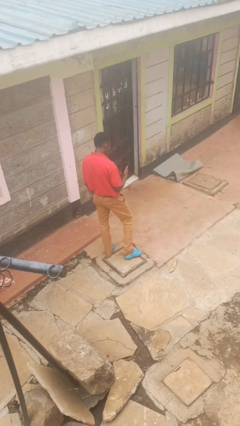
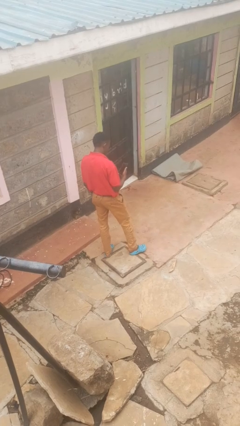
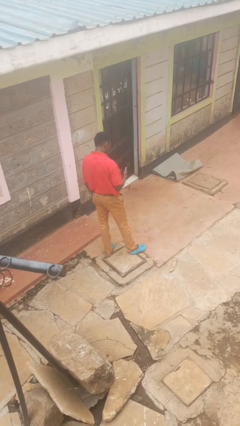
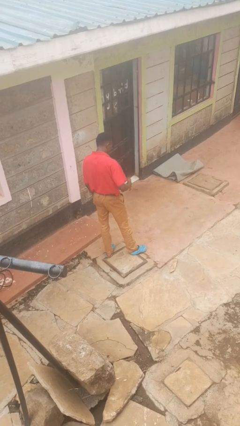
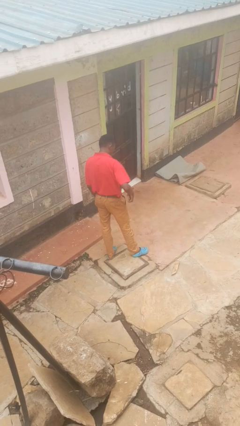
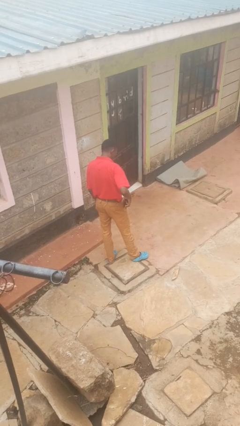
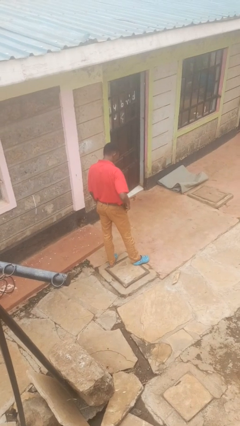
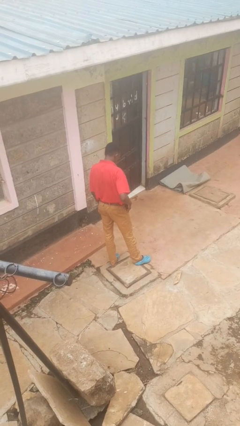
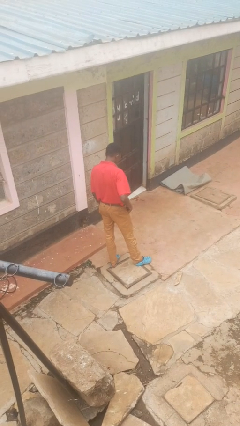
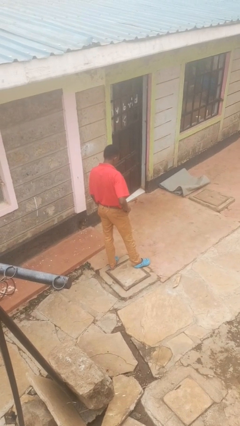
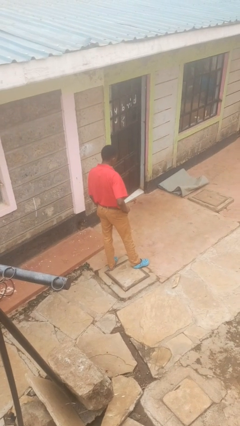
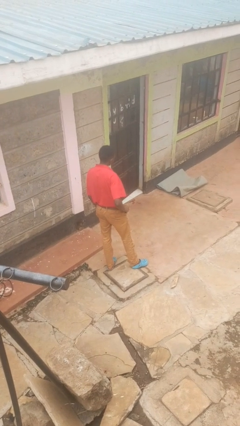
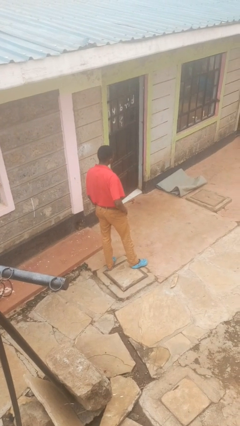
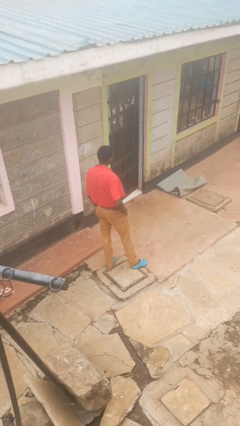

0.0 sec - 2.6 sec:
person puts phone into pocket

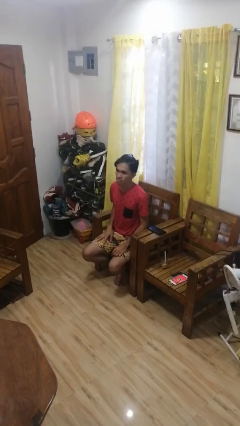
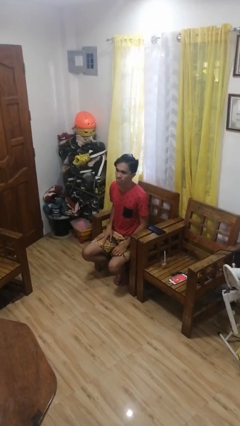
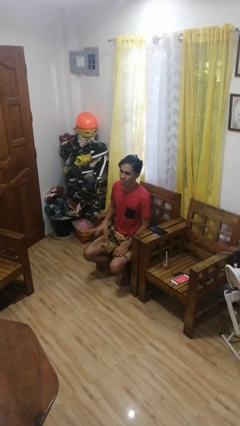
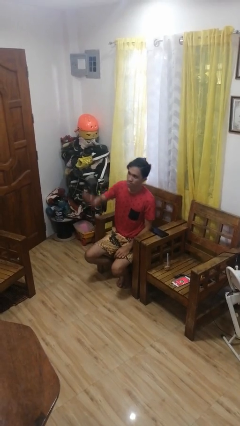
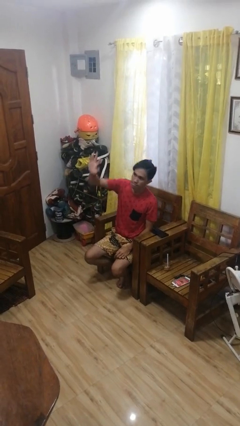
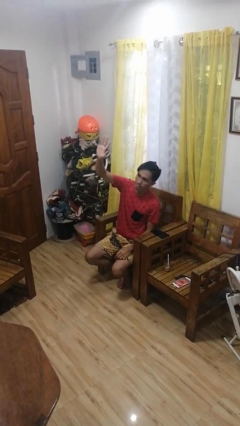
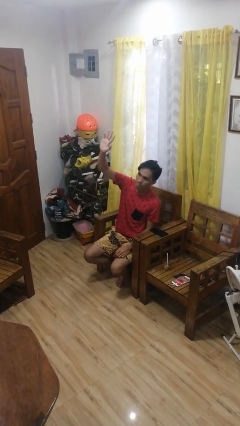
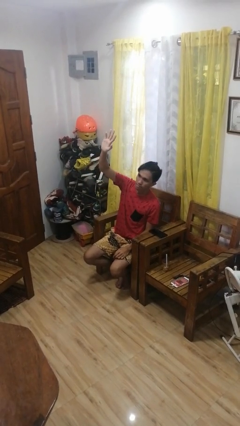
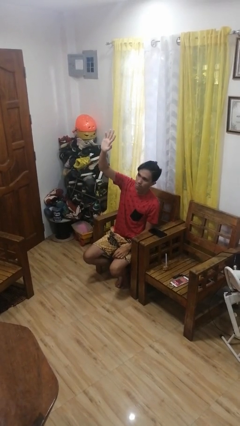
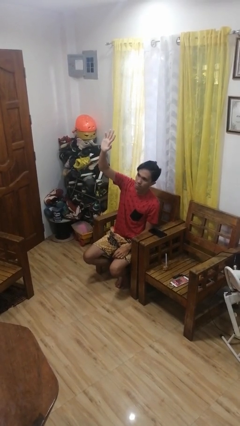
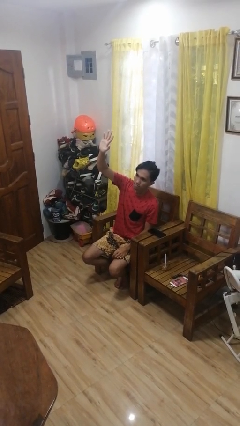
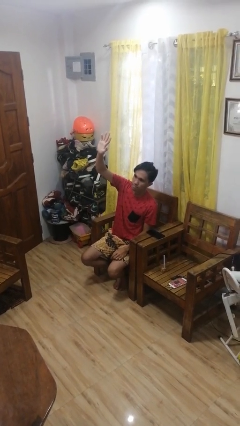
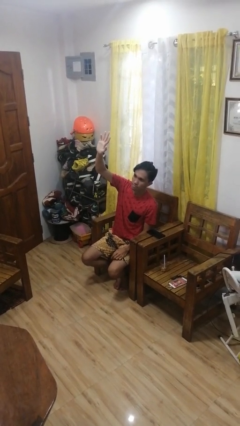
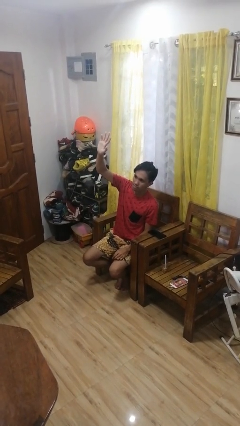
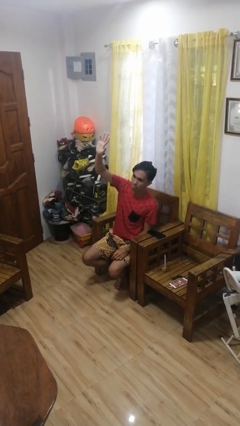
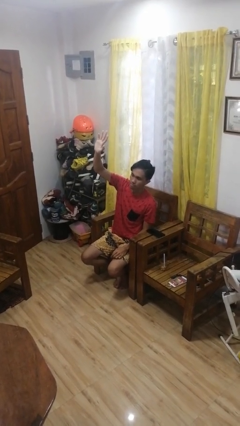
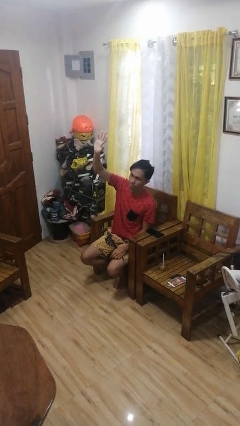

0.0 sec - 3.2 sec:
person gestures raise hand

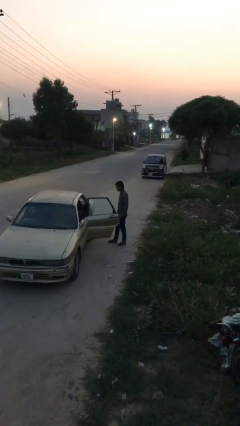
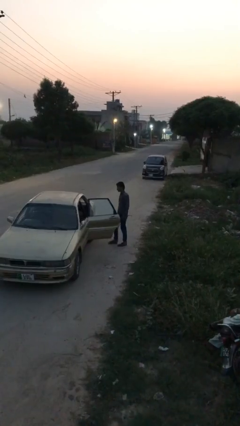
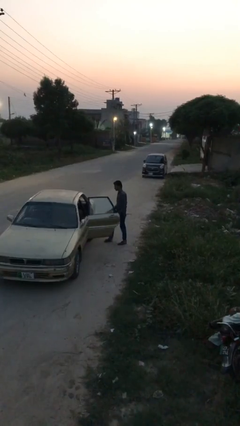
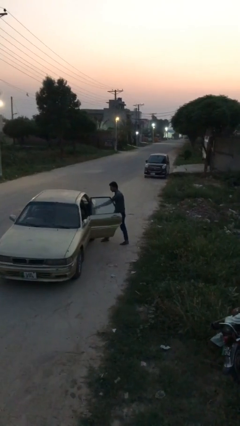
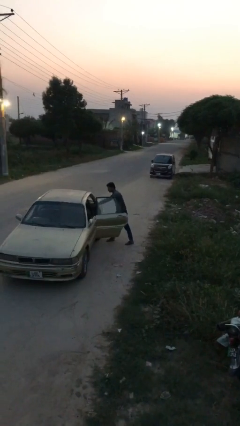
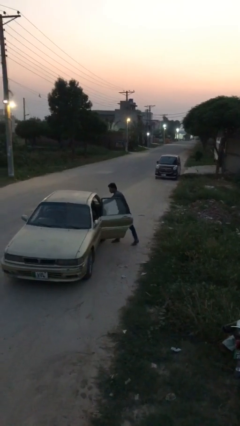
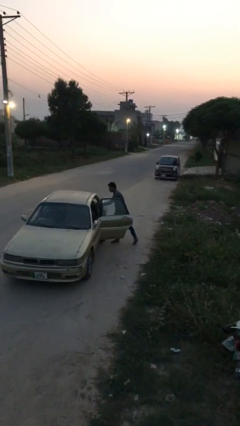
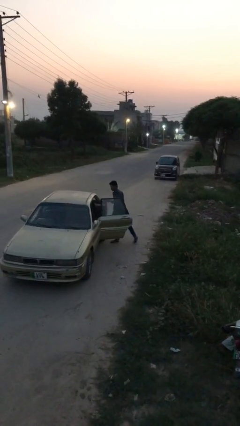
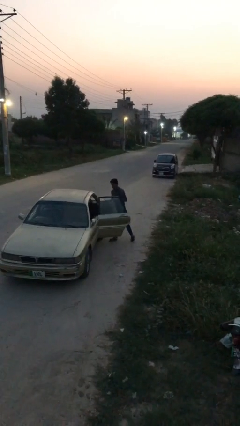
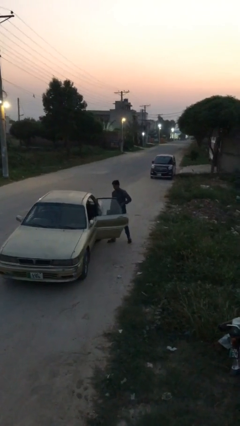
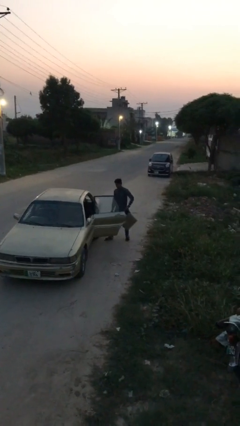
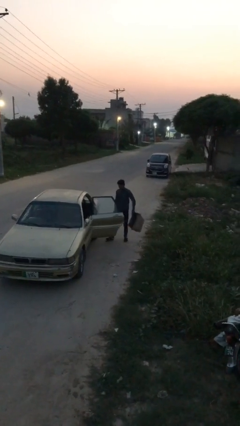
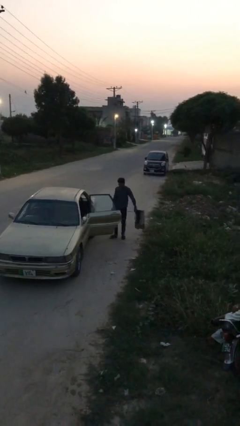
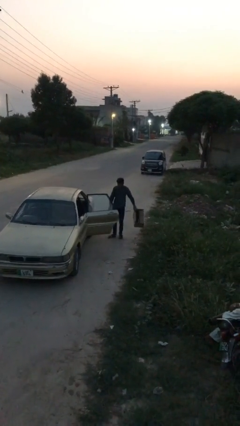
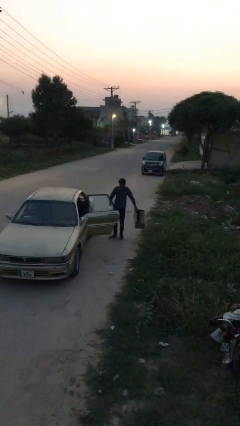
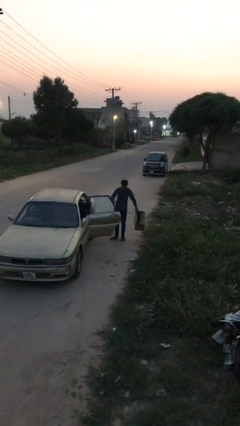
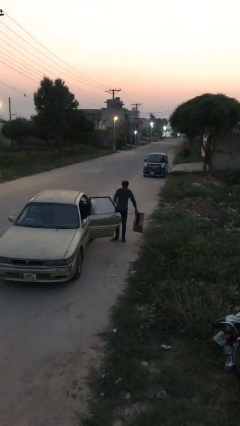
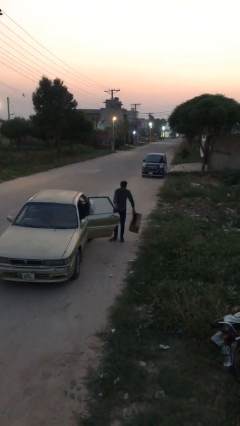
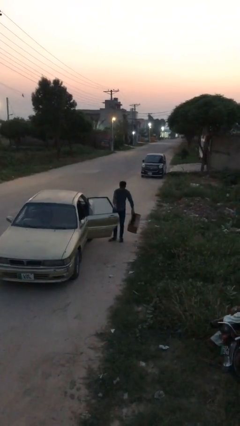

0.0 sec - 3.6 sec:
person unloads car

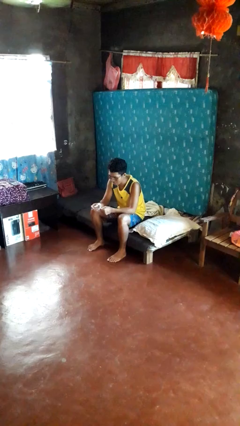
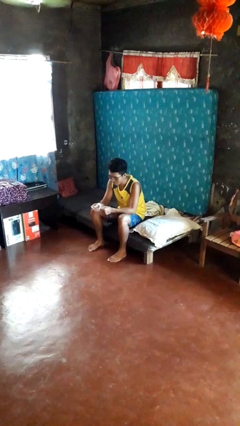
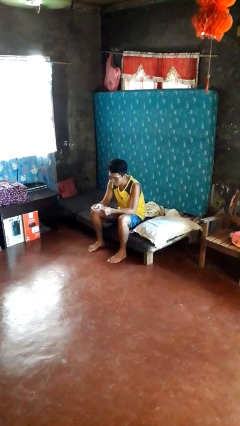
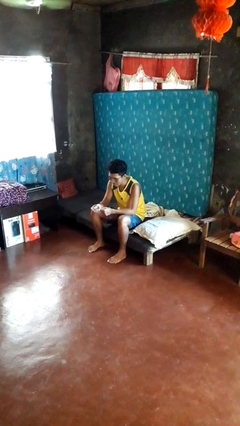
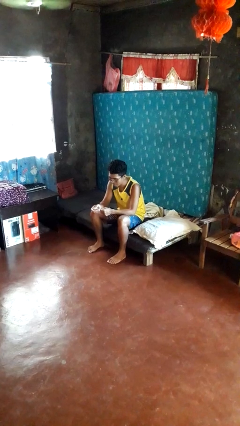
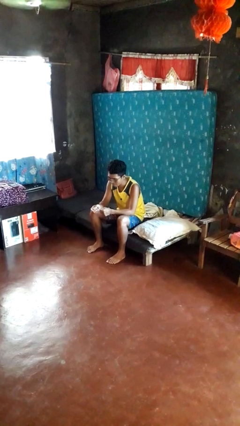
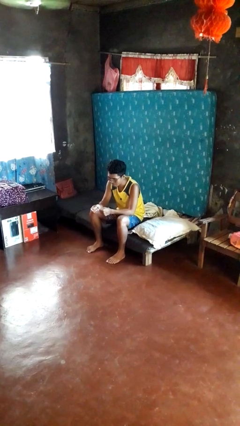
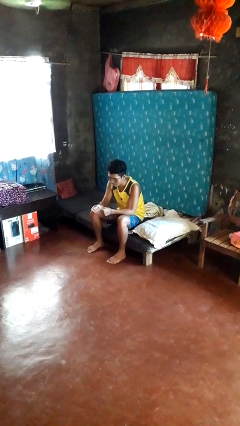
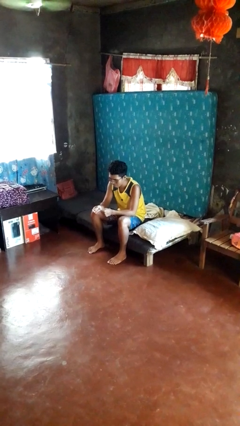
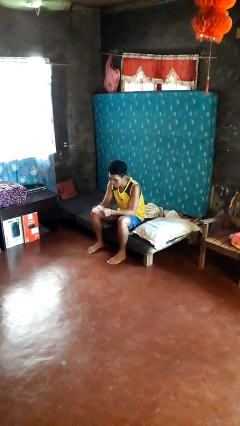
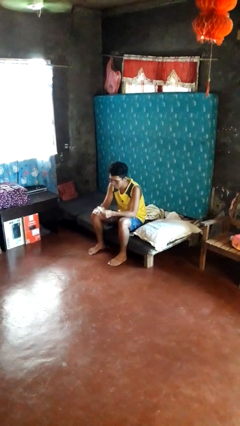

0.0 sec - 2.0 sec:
person clips fingernails

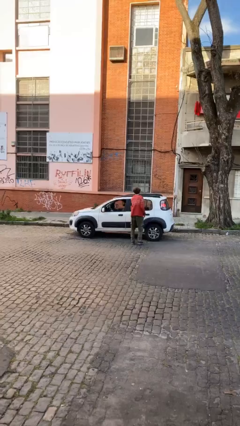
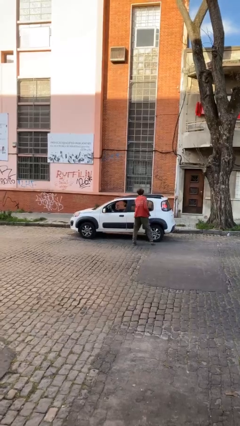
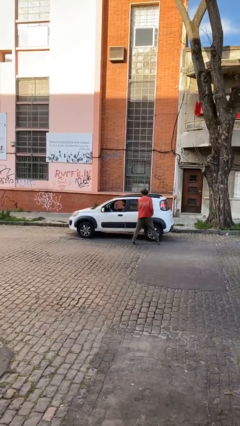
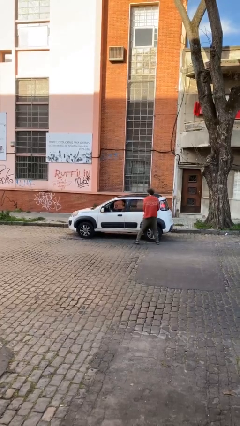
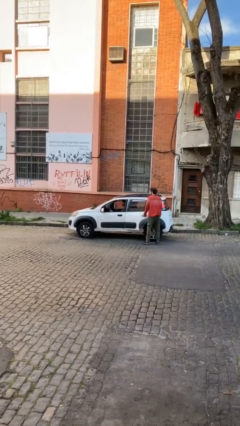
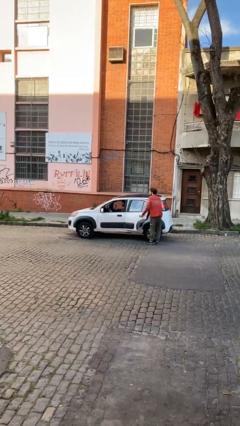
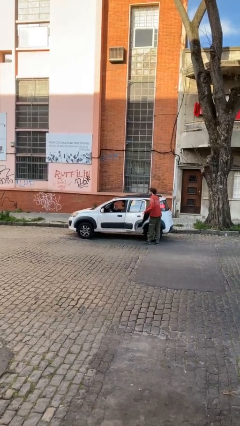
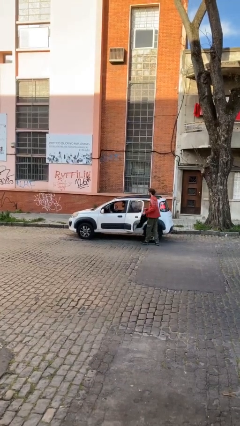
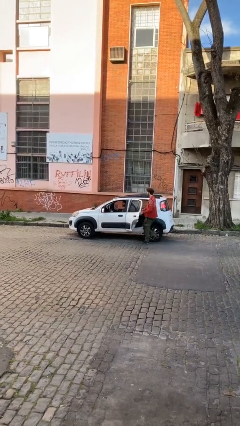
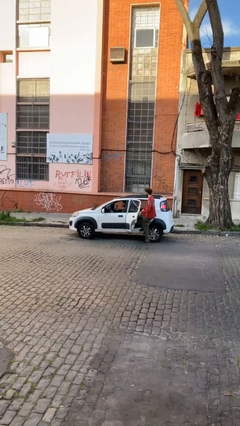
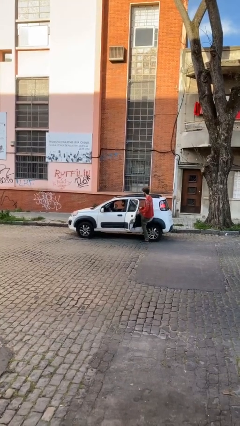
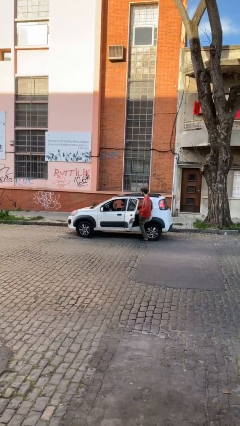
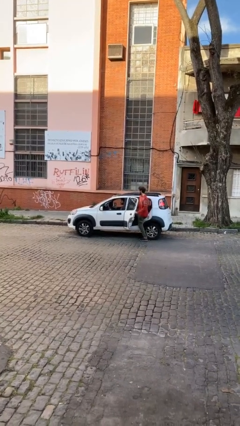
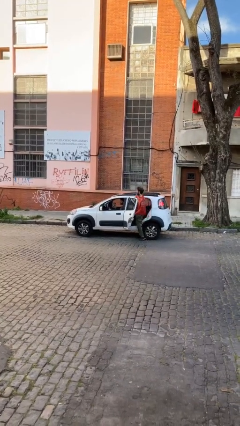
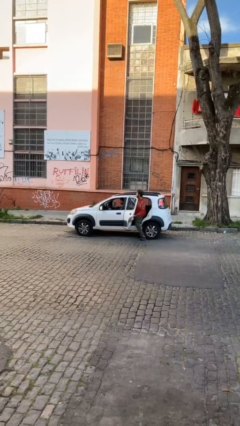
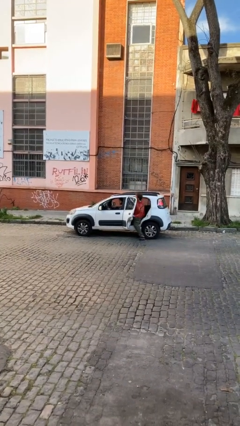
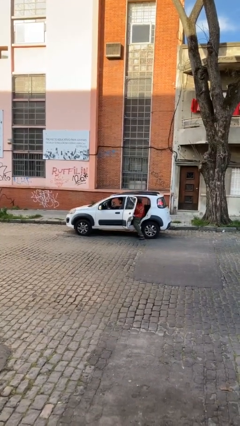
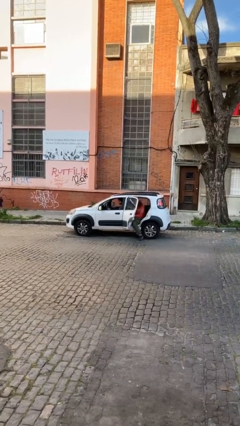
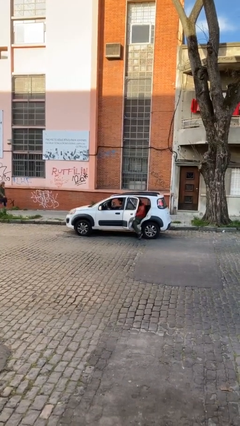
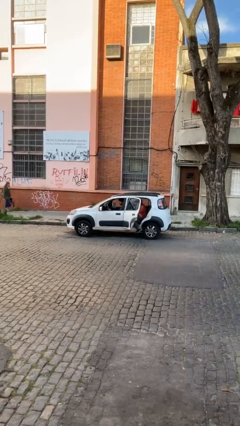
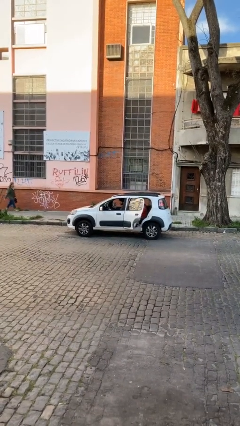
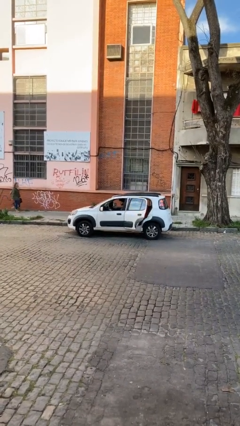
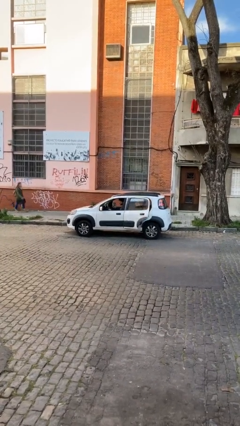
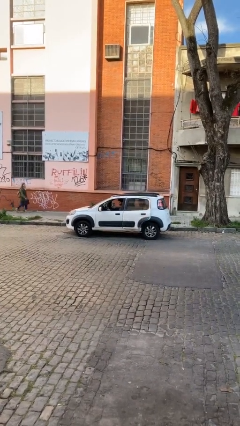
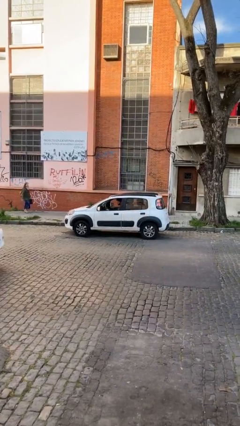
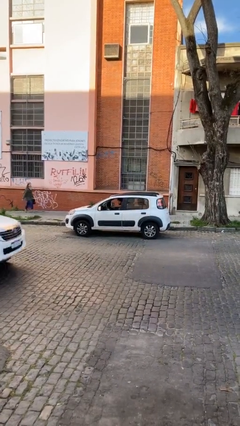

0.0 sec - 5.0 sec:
car picks up person

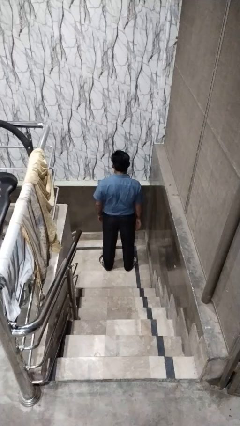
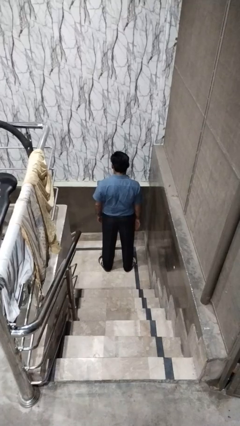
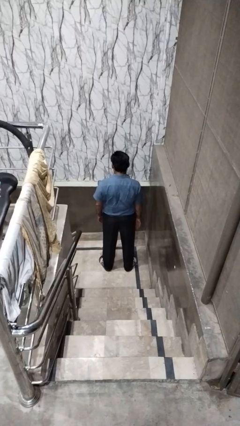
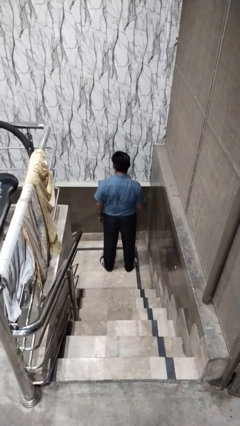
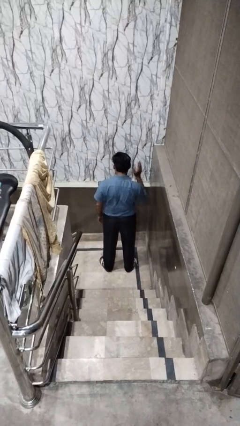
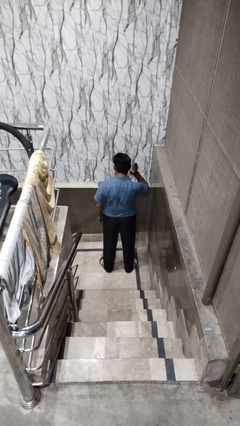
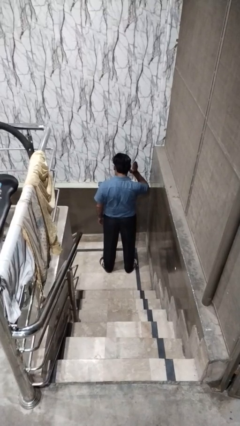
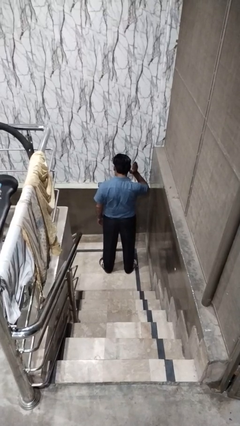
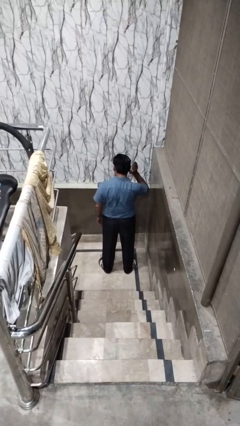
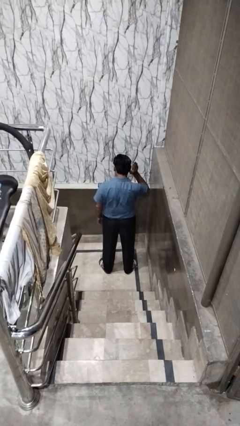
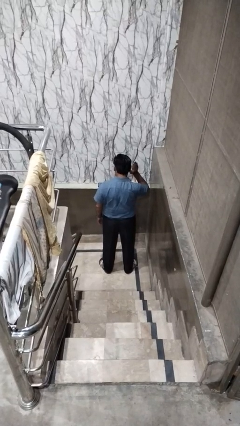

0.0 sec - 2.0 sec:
person gestures listen closely
